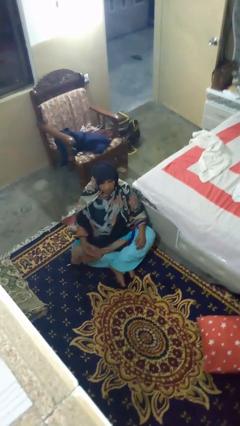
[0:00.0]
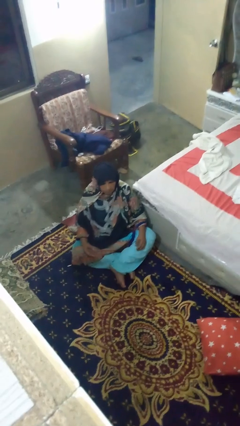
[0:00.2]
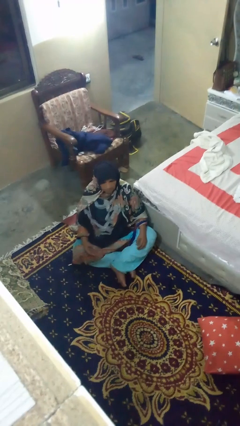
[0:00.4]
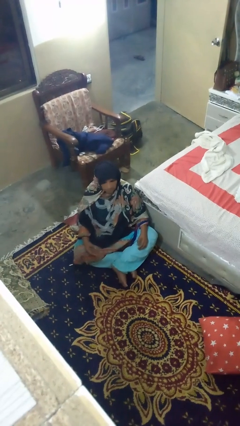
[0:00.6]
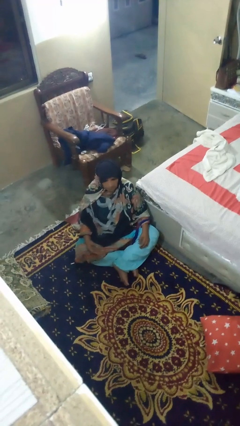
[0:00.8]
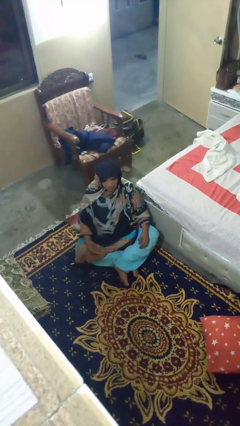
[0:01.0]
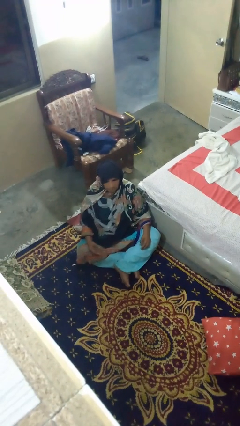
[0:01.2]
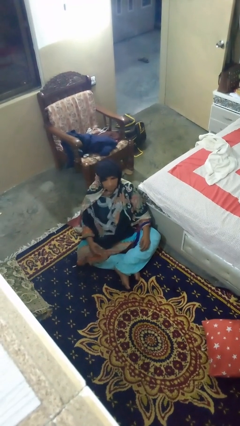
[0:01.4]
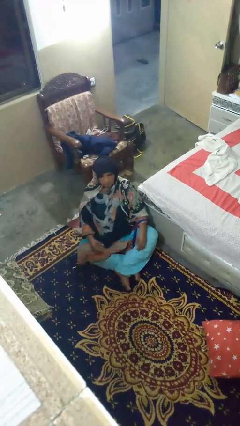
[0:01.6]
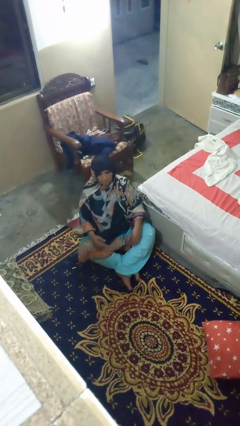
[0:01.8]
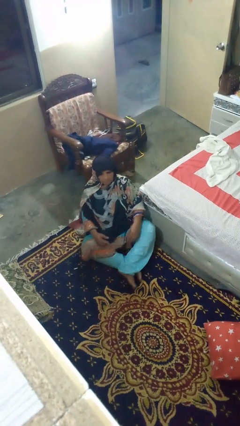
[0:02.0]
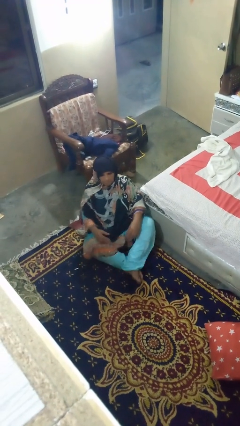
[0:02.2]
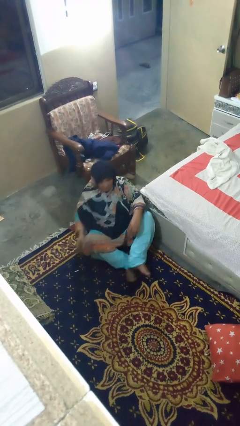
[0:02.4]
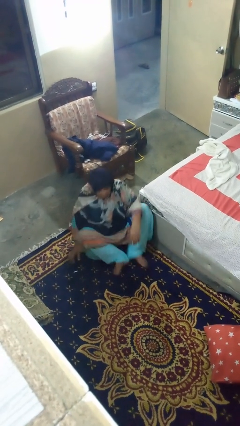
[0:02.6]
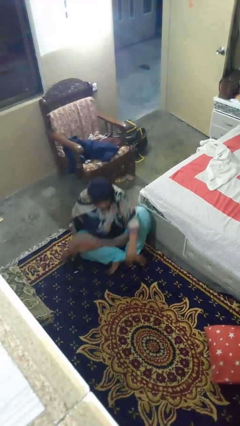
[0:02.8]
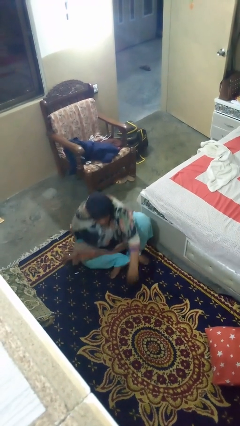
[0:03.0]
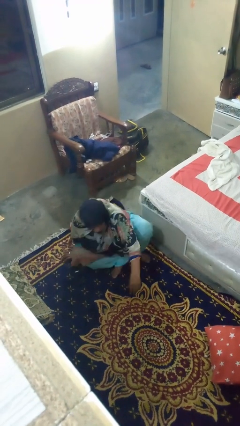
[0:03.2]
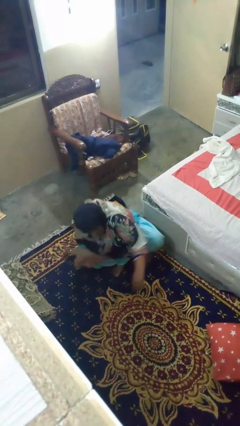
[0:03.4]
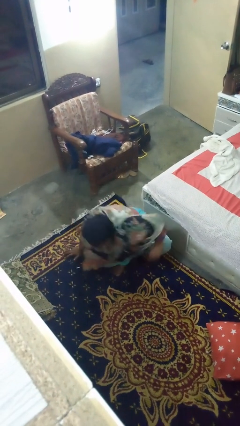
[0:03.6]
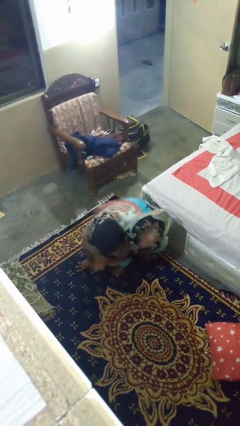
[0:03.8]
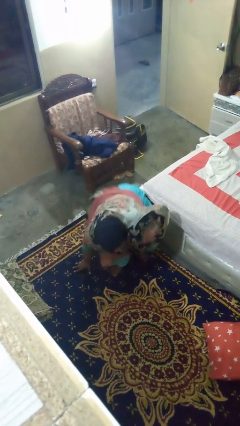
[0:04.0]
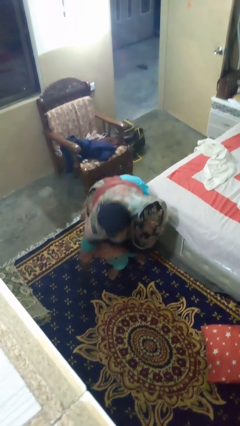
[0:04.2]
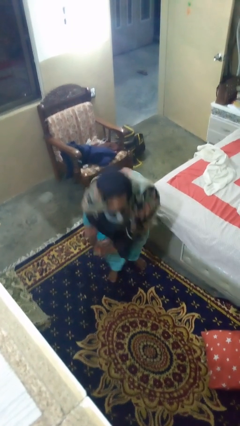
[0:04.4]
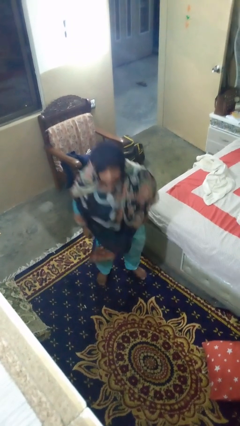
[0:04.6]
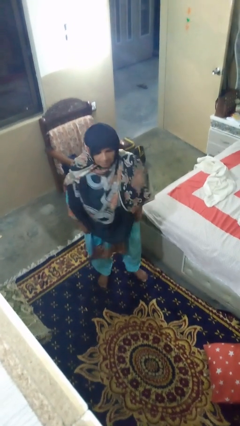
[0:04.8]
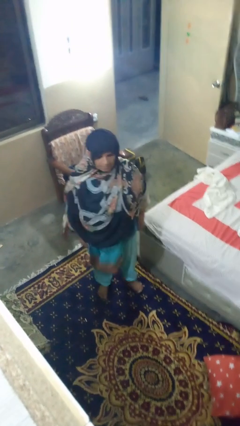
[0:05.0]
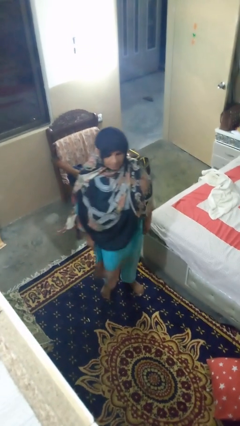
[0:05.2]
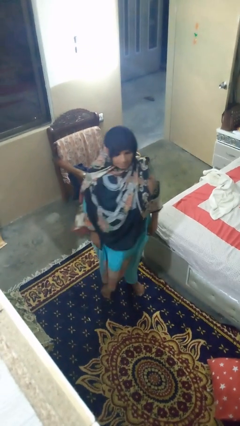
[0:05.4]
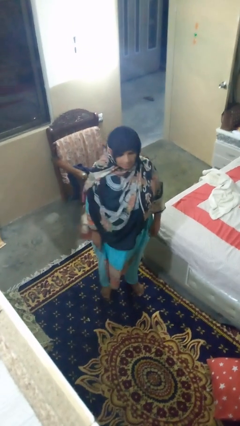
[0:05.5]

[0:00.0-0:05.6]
person stands up from floor

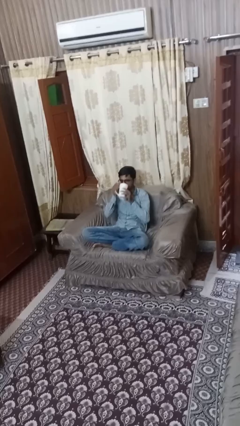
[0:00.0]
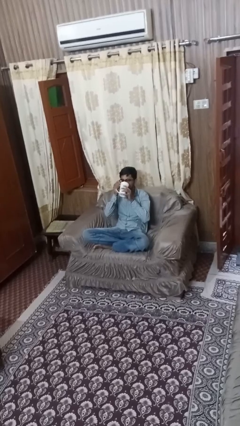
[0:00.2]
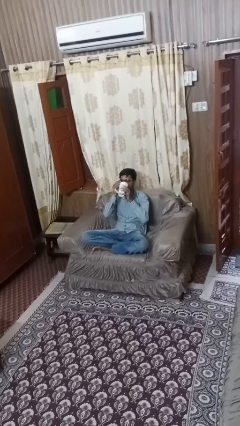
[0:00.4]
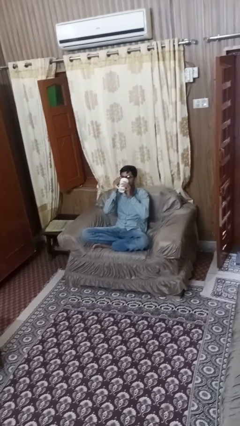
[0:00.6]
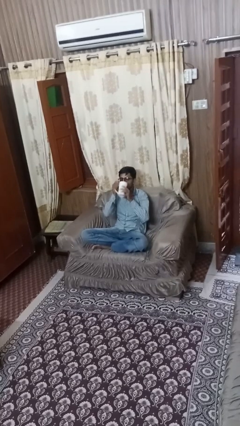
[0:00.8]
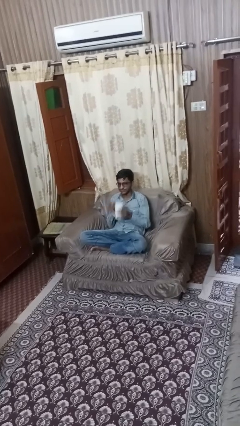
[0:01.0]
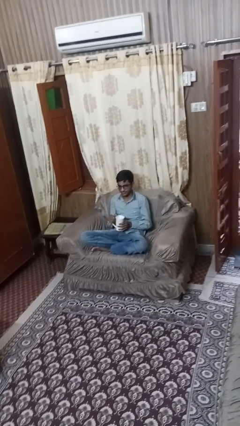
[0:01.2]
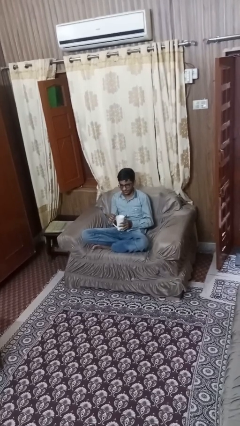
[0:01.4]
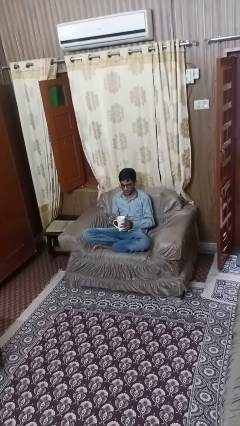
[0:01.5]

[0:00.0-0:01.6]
person drinks from mug

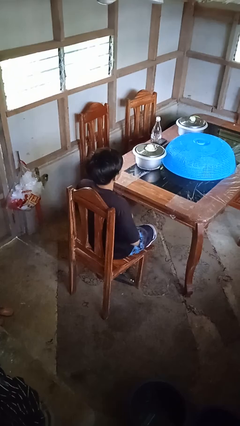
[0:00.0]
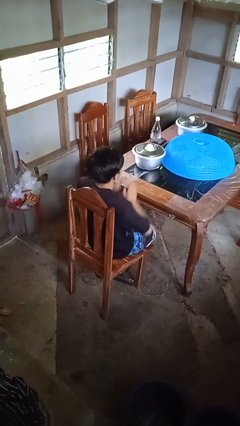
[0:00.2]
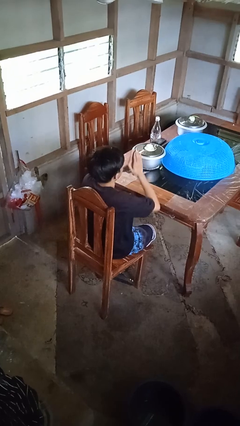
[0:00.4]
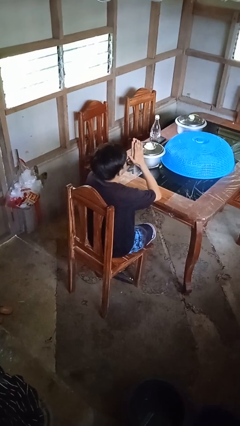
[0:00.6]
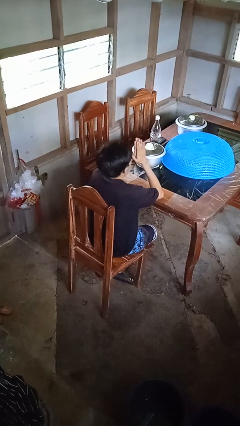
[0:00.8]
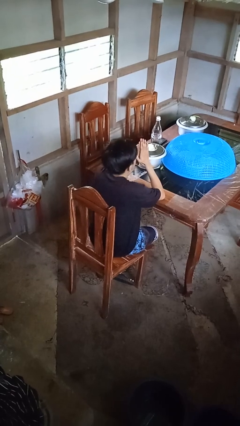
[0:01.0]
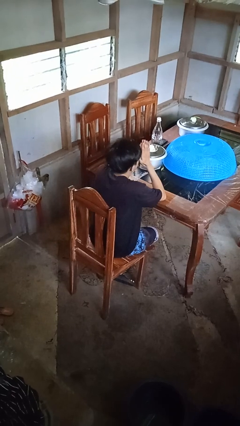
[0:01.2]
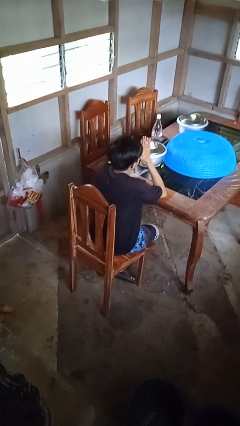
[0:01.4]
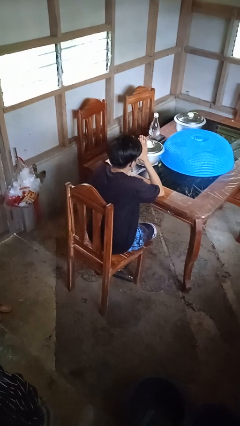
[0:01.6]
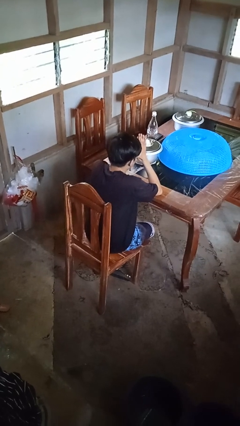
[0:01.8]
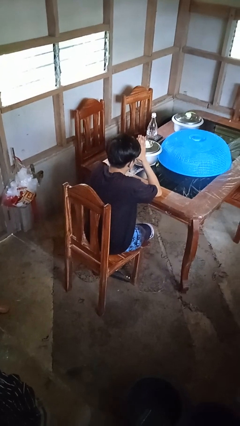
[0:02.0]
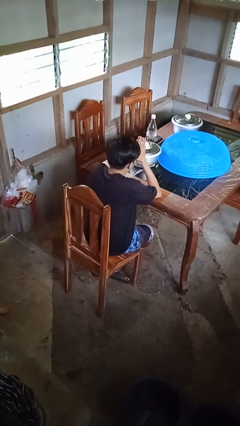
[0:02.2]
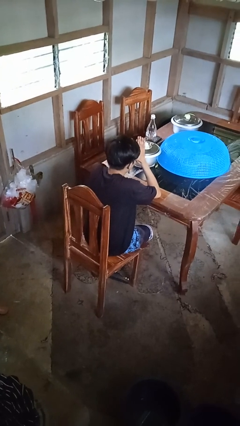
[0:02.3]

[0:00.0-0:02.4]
person prays

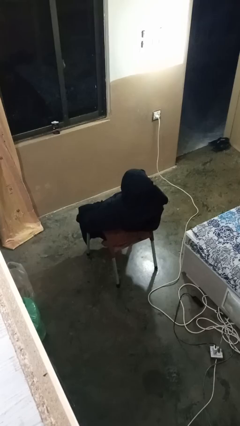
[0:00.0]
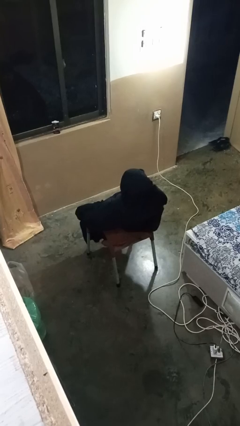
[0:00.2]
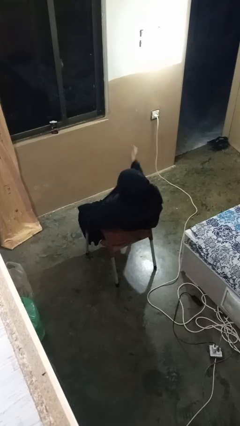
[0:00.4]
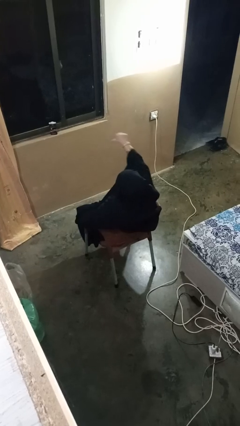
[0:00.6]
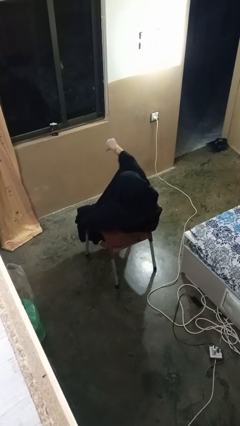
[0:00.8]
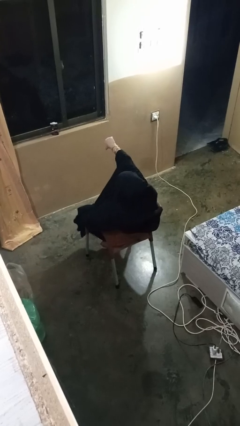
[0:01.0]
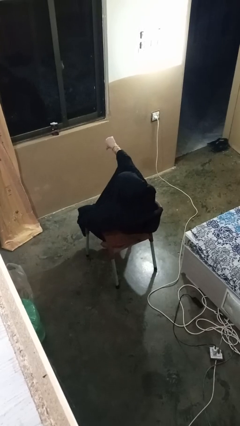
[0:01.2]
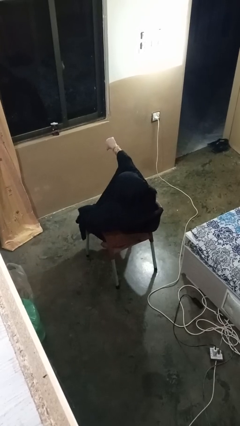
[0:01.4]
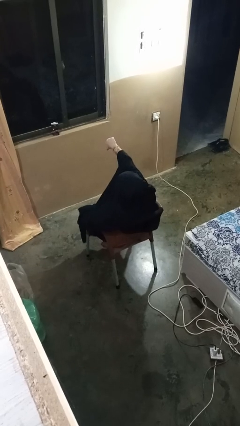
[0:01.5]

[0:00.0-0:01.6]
person gestures thumbs down

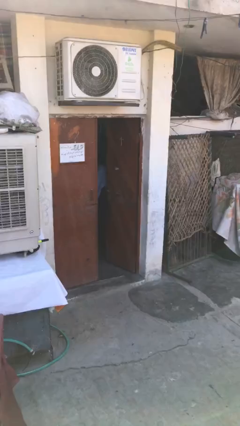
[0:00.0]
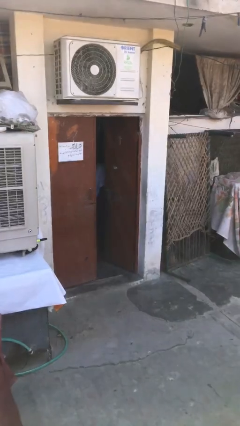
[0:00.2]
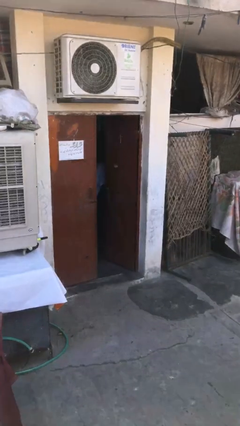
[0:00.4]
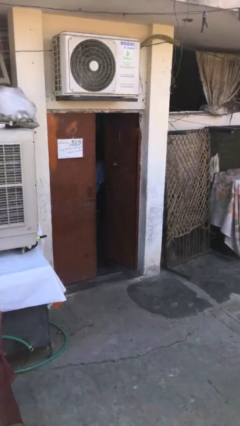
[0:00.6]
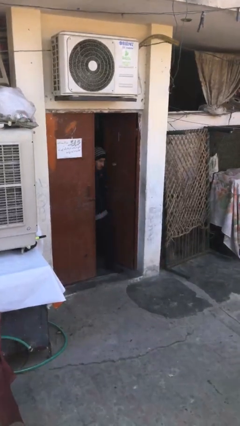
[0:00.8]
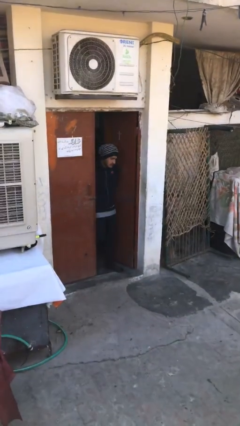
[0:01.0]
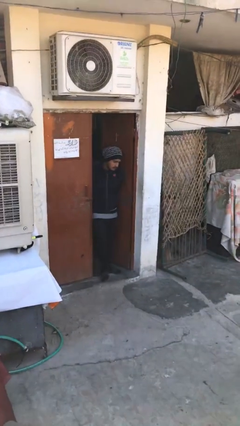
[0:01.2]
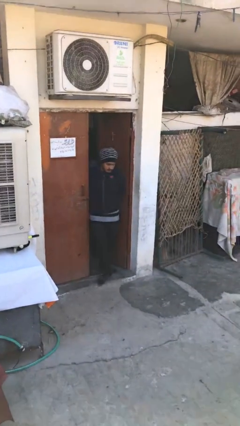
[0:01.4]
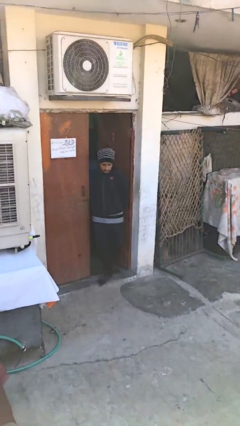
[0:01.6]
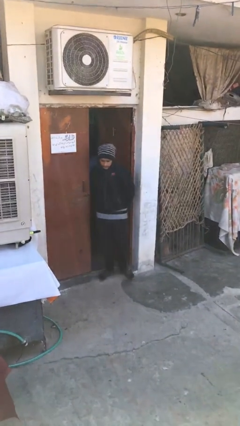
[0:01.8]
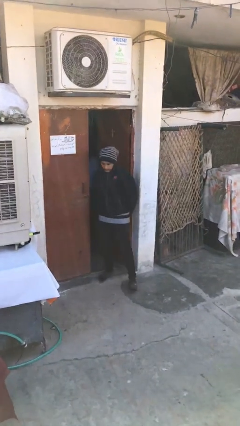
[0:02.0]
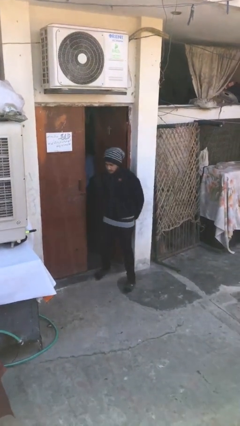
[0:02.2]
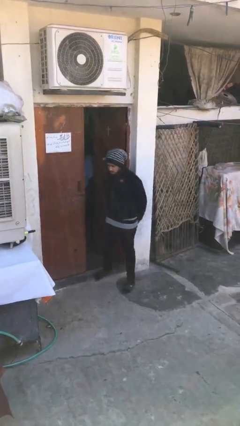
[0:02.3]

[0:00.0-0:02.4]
person enters scene through structure

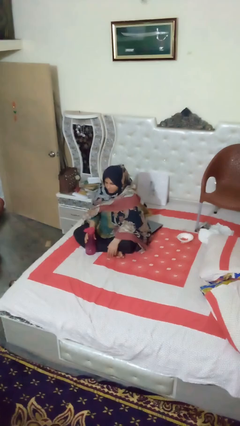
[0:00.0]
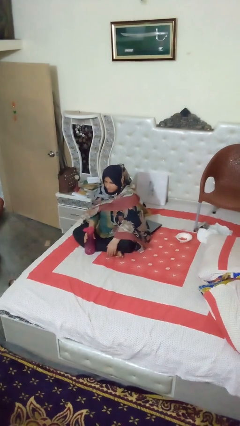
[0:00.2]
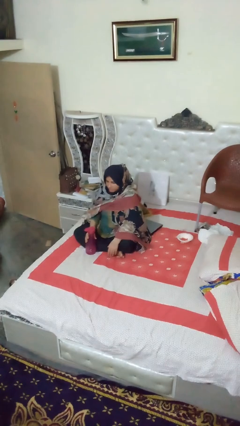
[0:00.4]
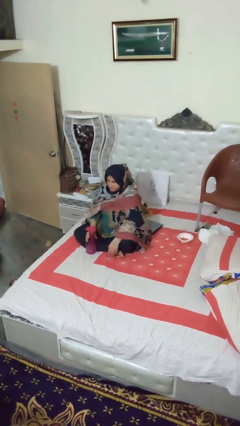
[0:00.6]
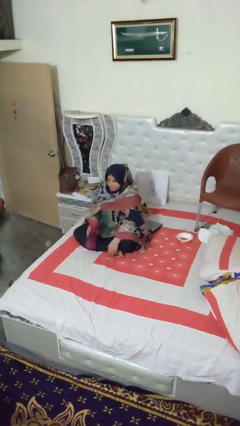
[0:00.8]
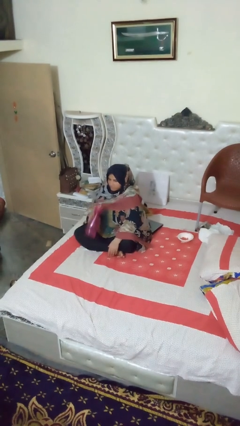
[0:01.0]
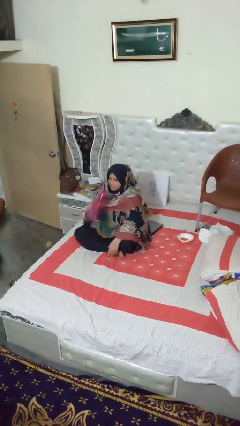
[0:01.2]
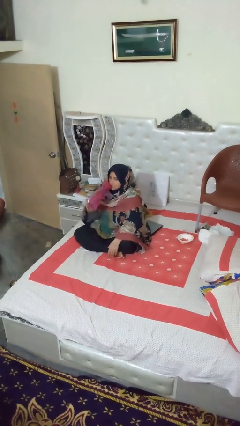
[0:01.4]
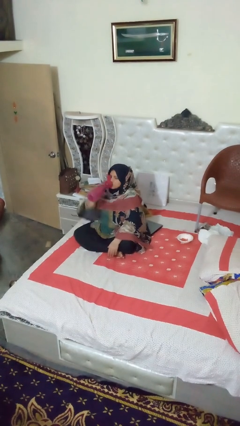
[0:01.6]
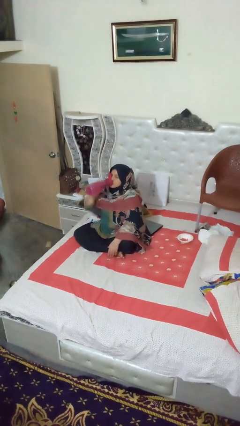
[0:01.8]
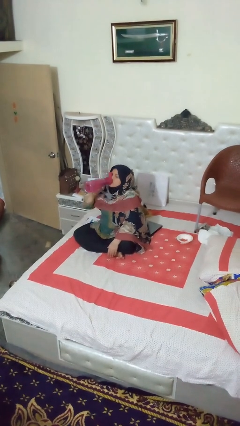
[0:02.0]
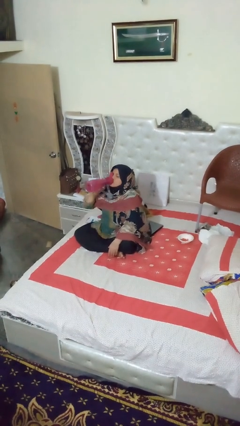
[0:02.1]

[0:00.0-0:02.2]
person drinks from bottle

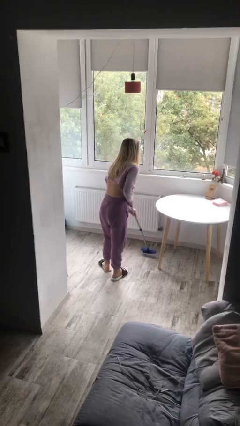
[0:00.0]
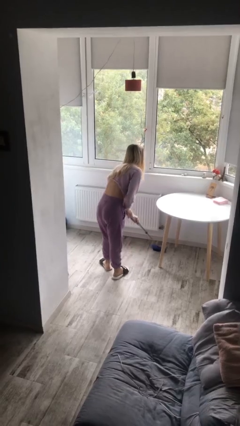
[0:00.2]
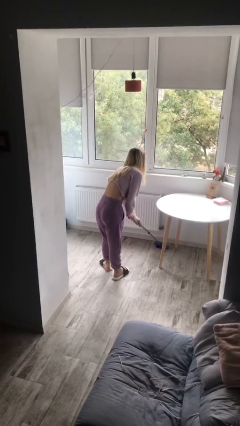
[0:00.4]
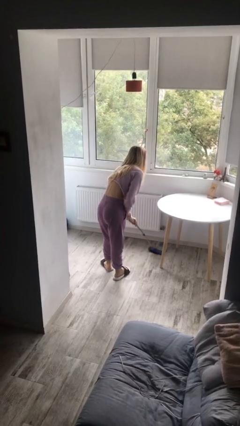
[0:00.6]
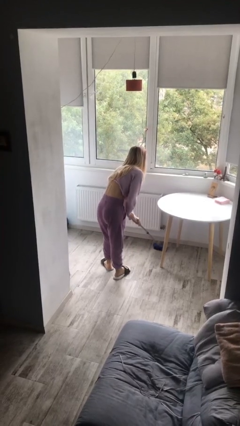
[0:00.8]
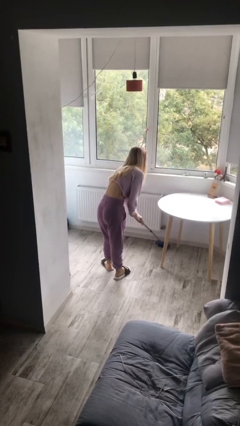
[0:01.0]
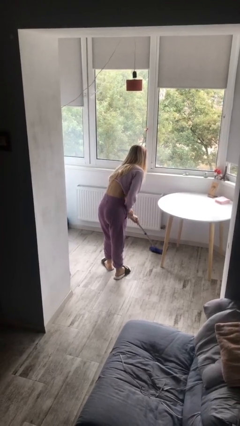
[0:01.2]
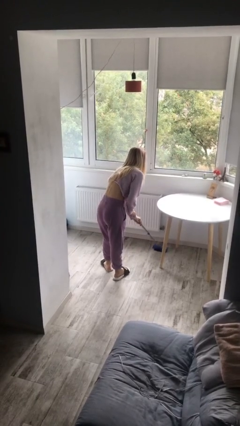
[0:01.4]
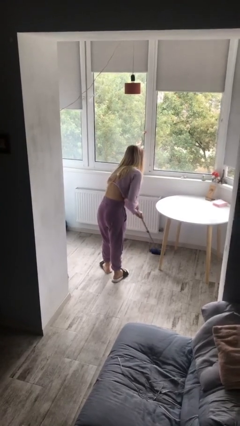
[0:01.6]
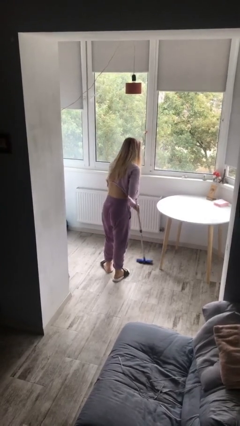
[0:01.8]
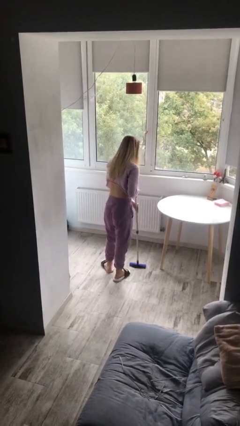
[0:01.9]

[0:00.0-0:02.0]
person mops
